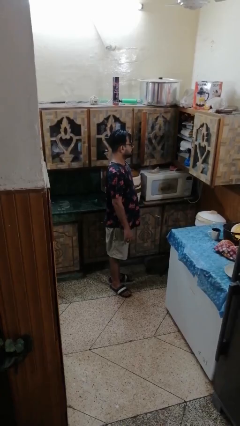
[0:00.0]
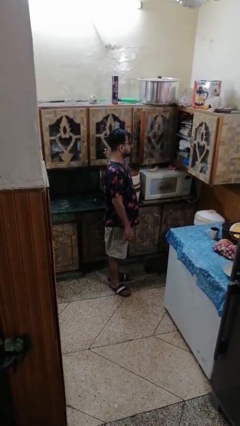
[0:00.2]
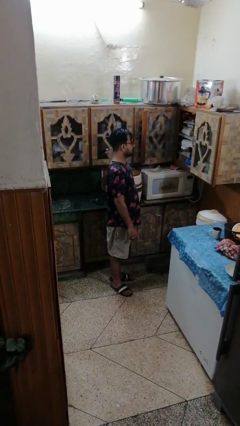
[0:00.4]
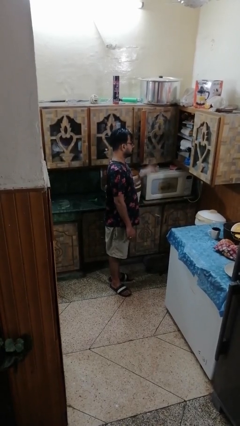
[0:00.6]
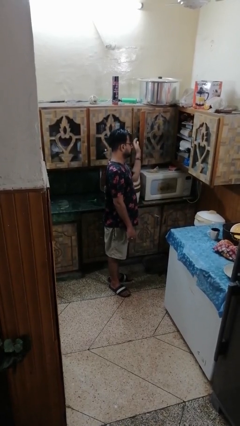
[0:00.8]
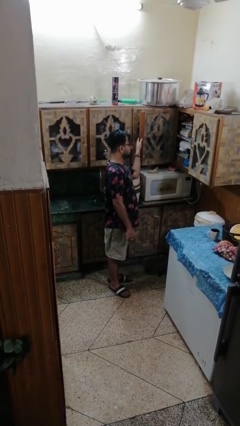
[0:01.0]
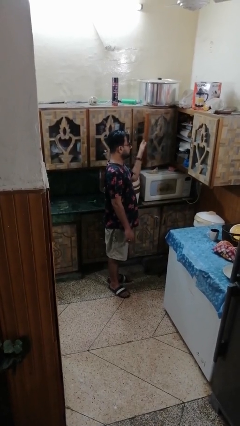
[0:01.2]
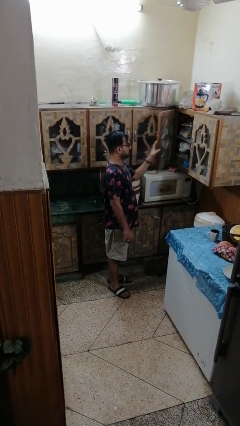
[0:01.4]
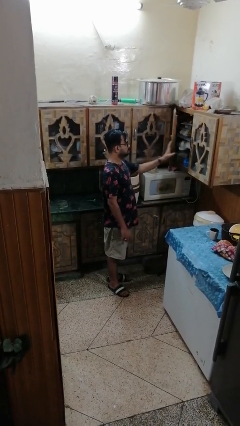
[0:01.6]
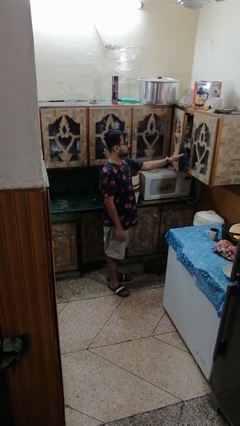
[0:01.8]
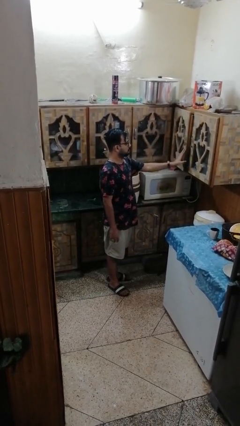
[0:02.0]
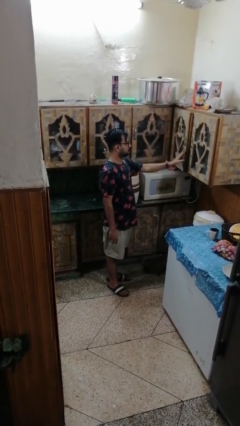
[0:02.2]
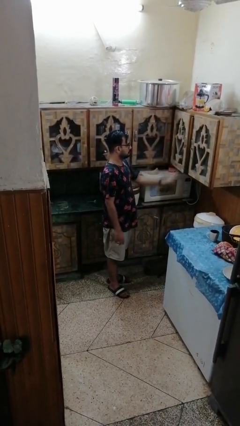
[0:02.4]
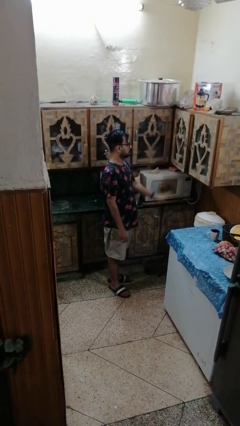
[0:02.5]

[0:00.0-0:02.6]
person closes cabinet

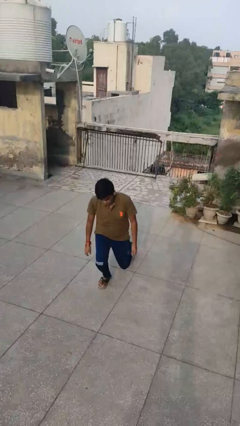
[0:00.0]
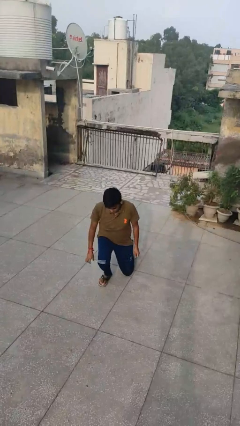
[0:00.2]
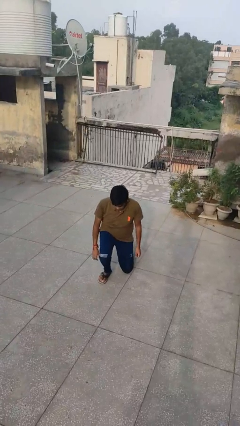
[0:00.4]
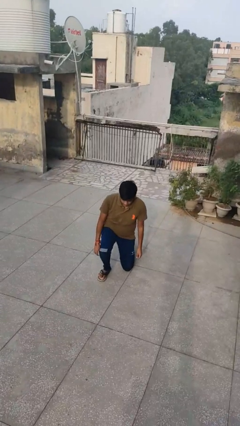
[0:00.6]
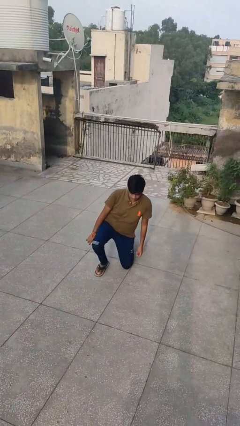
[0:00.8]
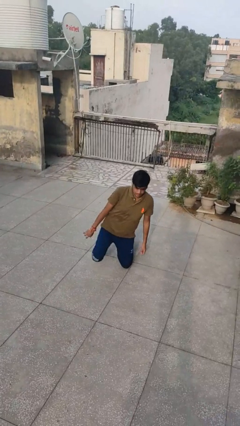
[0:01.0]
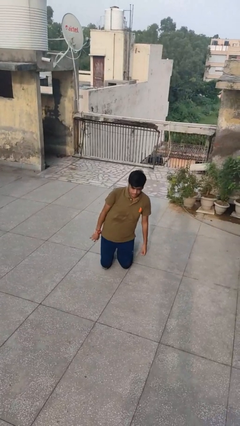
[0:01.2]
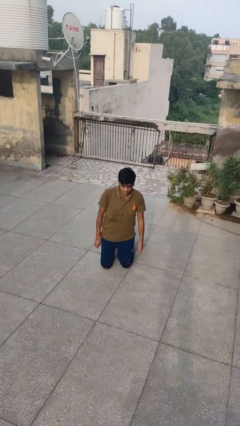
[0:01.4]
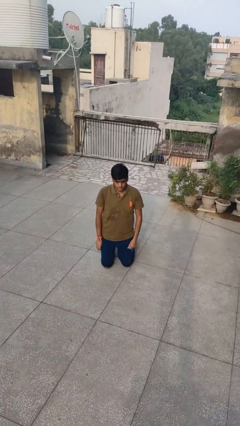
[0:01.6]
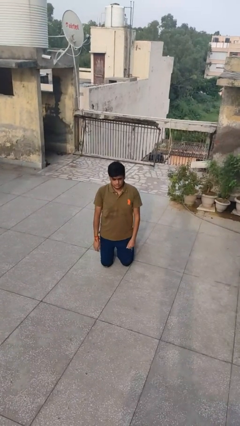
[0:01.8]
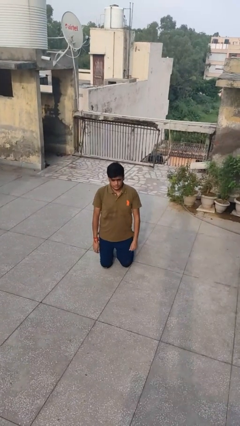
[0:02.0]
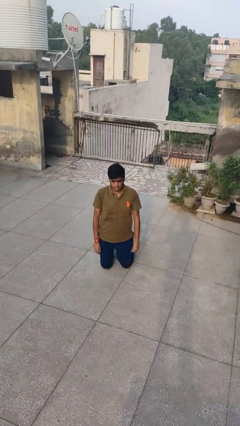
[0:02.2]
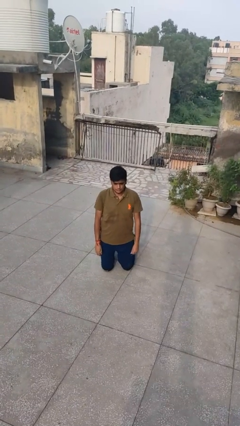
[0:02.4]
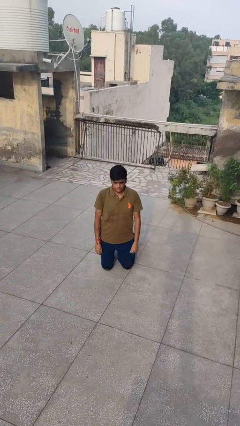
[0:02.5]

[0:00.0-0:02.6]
person kneels

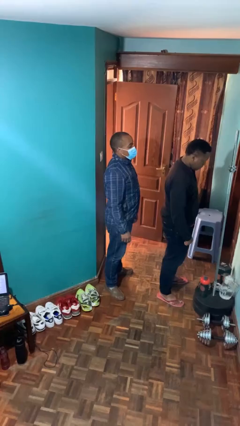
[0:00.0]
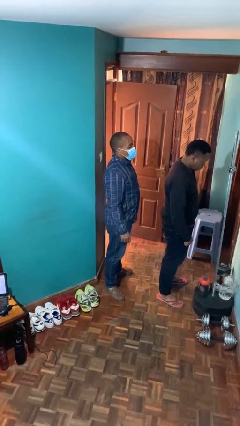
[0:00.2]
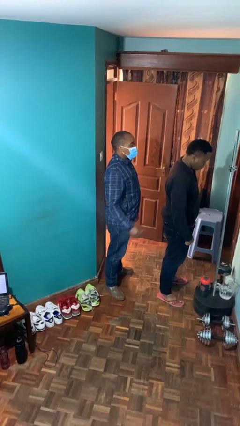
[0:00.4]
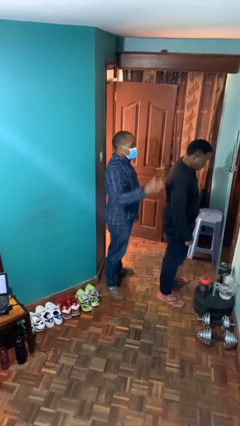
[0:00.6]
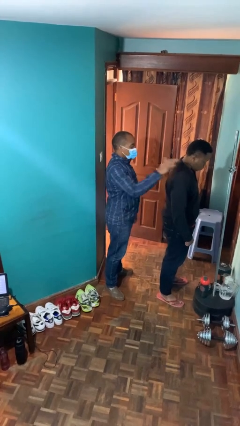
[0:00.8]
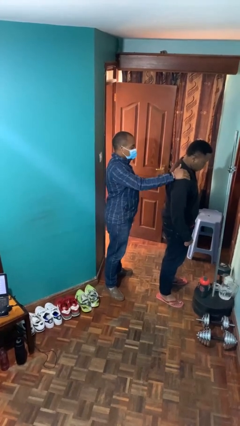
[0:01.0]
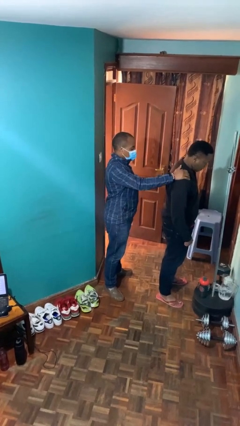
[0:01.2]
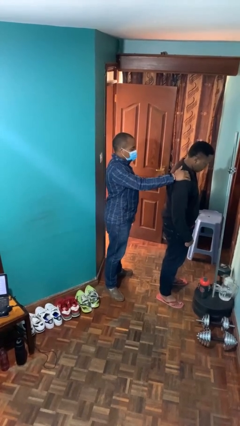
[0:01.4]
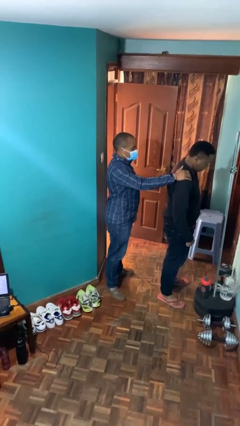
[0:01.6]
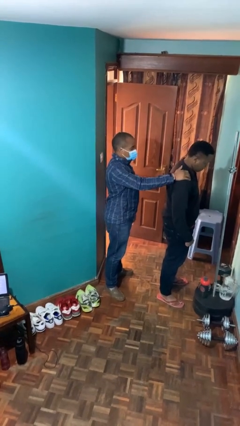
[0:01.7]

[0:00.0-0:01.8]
person grabs person by shoulder

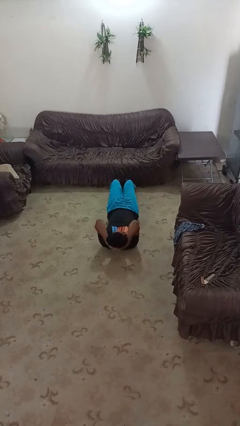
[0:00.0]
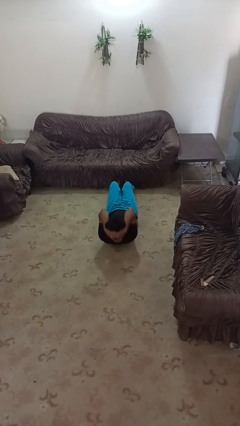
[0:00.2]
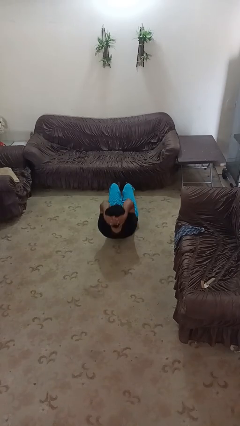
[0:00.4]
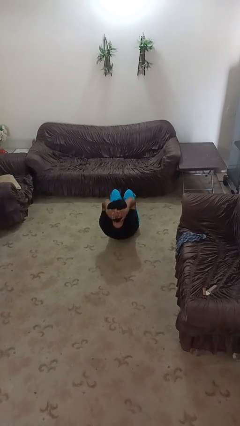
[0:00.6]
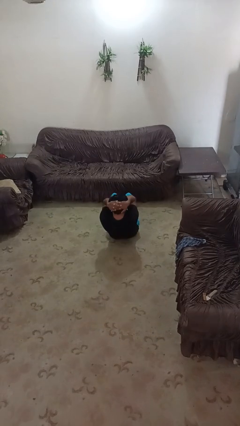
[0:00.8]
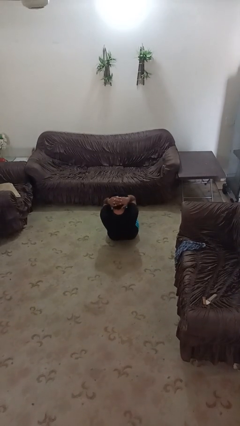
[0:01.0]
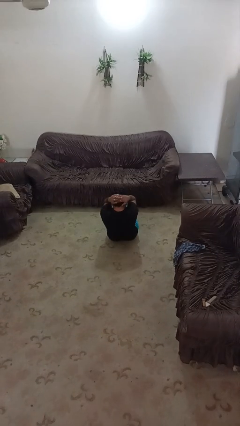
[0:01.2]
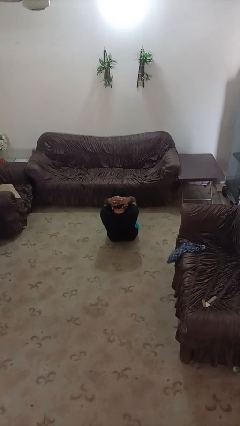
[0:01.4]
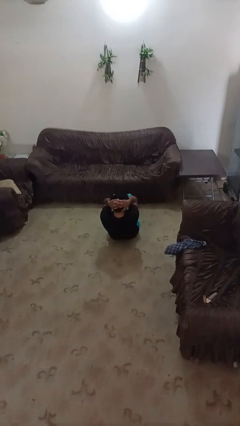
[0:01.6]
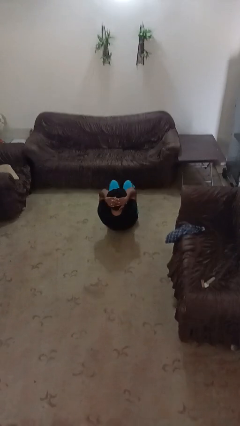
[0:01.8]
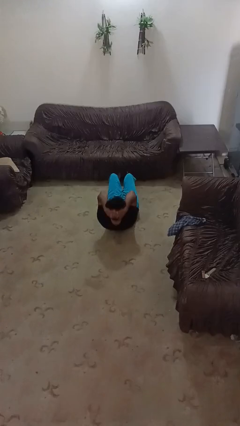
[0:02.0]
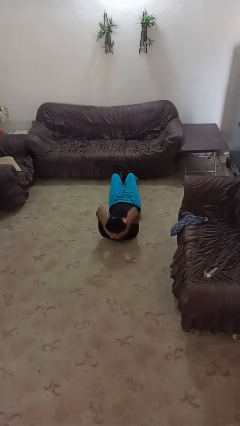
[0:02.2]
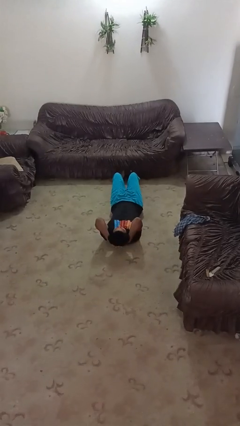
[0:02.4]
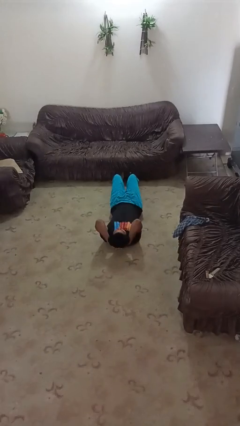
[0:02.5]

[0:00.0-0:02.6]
person exercises with situp

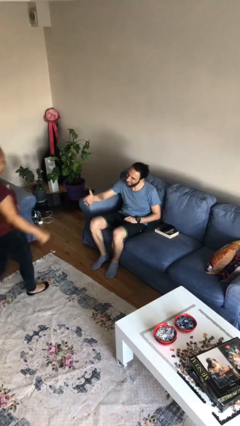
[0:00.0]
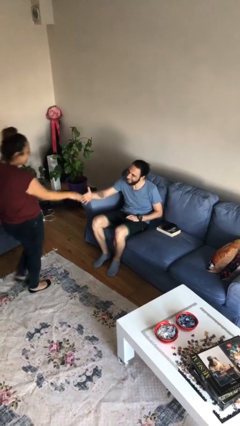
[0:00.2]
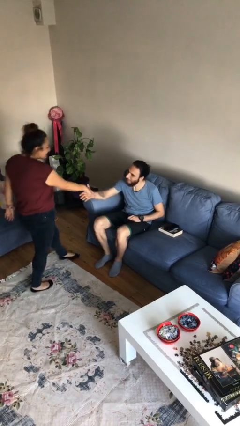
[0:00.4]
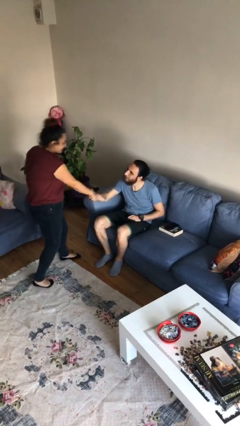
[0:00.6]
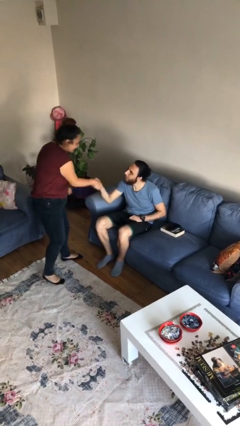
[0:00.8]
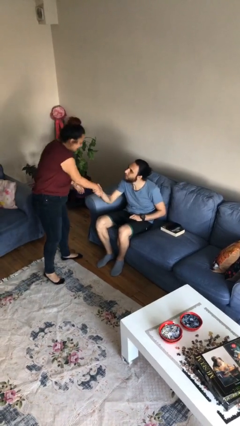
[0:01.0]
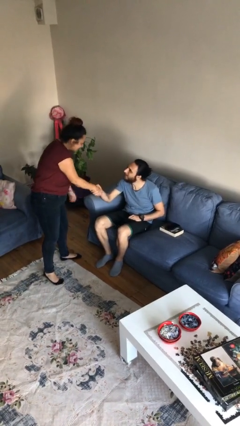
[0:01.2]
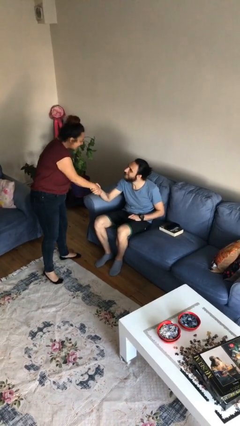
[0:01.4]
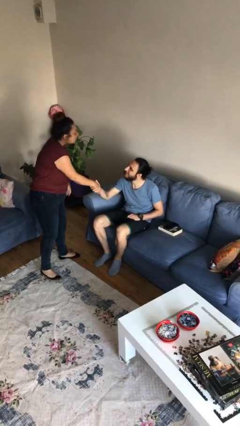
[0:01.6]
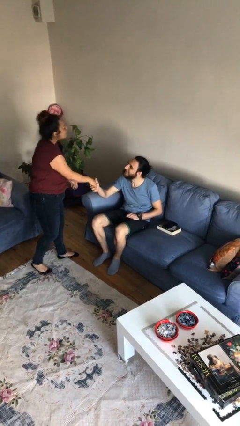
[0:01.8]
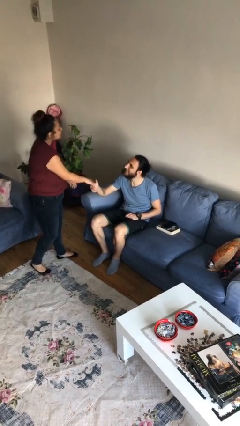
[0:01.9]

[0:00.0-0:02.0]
person shakes hand

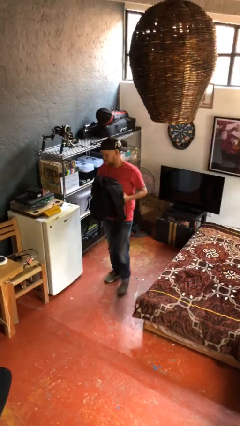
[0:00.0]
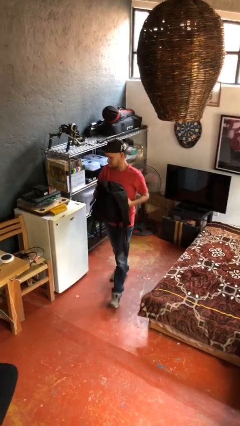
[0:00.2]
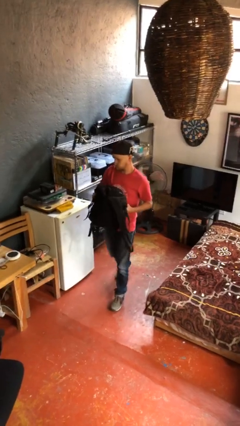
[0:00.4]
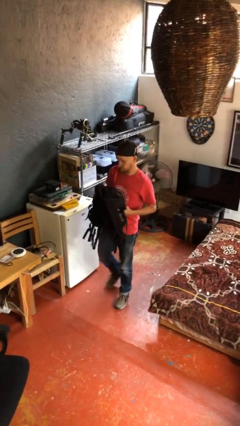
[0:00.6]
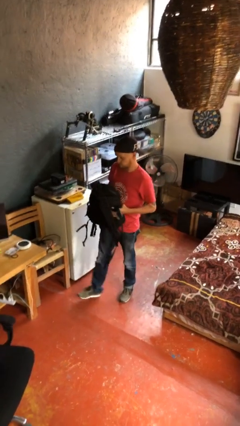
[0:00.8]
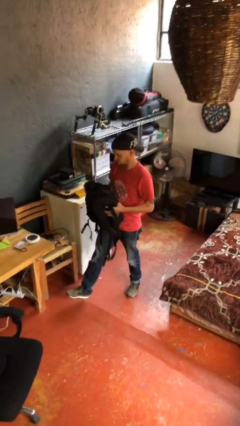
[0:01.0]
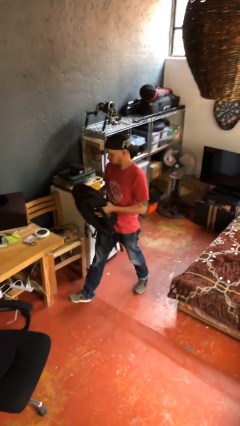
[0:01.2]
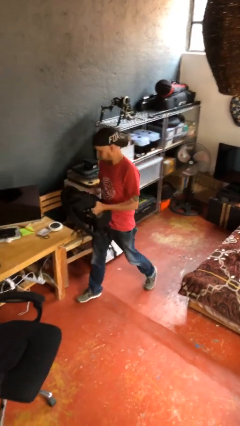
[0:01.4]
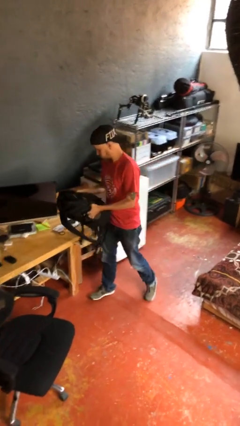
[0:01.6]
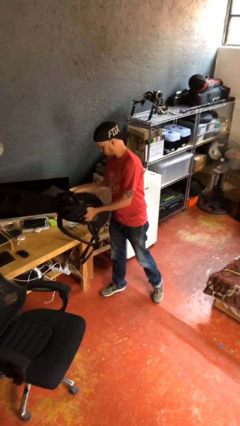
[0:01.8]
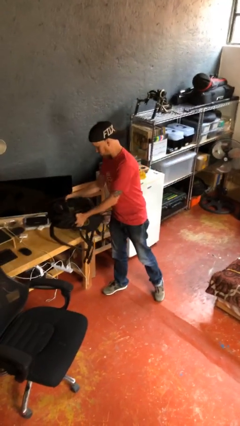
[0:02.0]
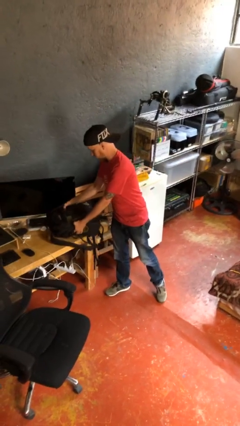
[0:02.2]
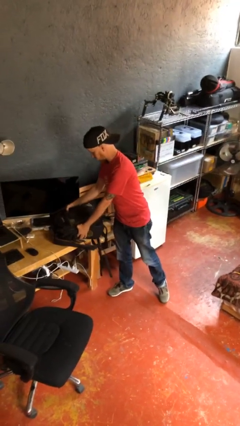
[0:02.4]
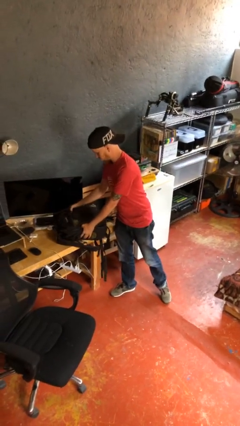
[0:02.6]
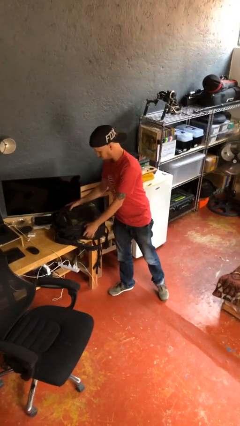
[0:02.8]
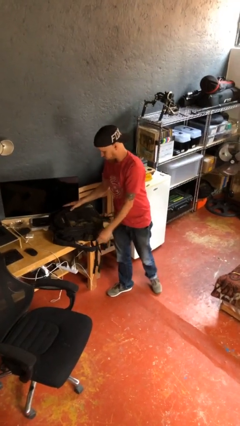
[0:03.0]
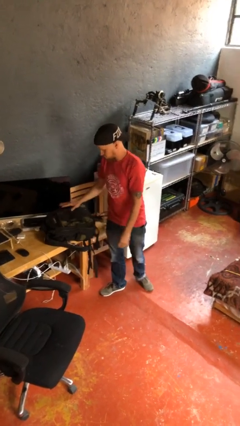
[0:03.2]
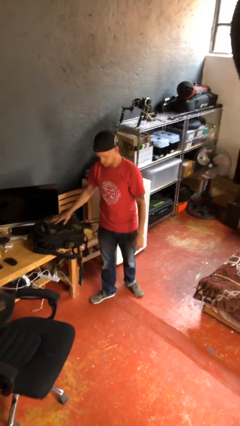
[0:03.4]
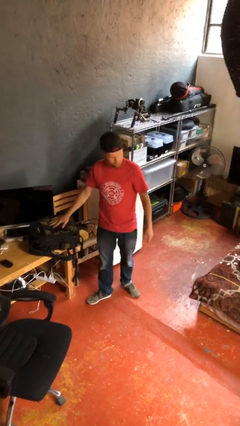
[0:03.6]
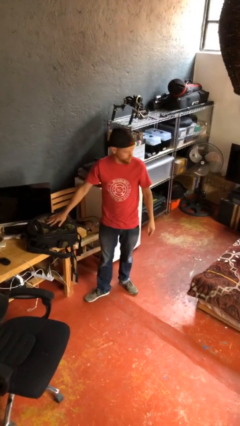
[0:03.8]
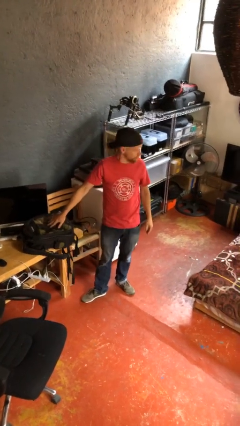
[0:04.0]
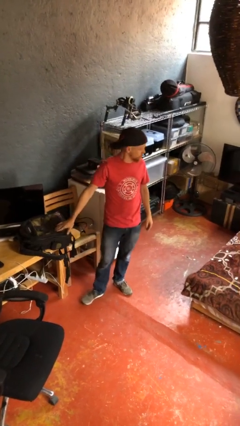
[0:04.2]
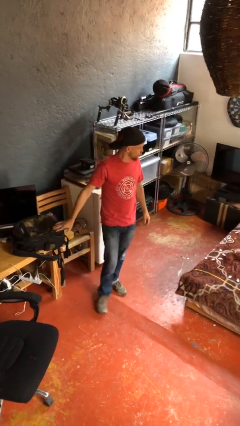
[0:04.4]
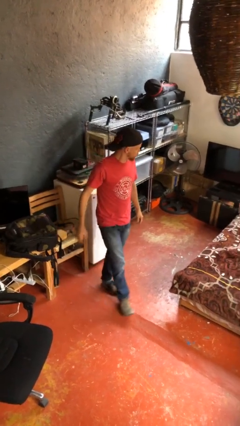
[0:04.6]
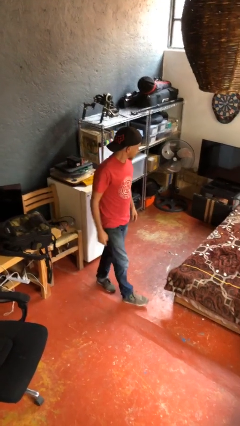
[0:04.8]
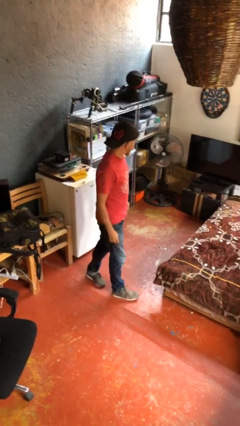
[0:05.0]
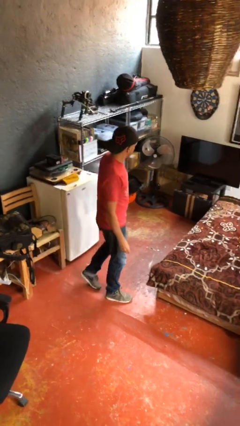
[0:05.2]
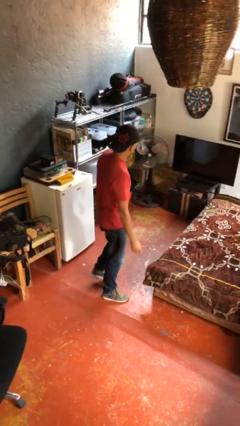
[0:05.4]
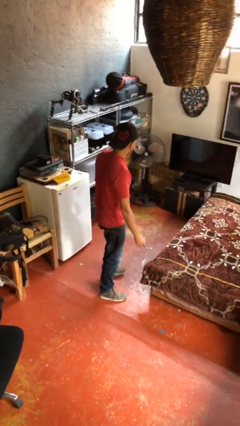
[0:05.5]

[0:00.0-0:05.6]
person puts down object on table

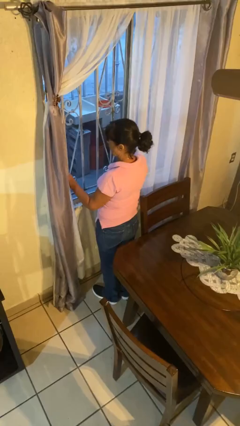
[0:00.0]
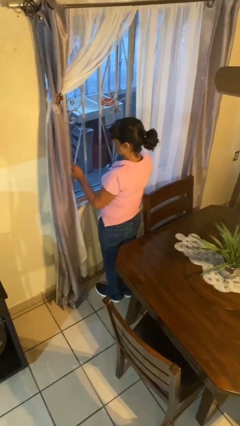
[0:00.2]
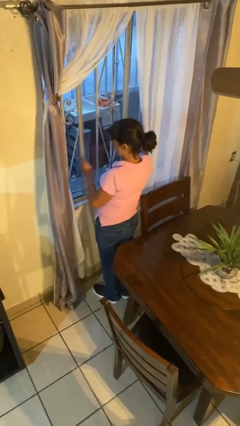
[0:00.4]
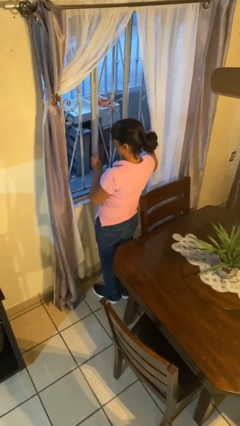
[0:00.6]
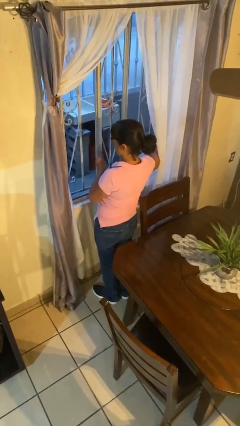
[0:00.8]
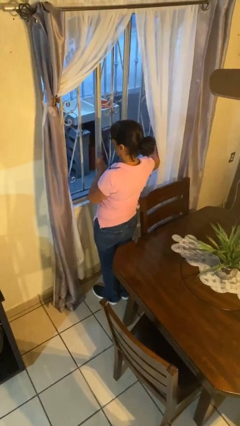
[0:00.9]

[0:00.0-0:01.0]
person opens home window
